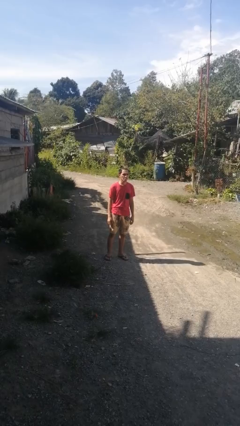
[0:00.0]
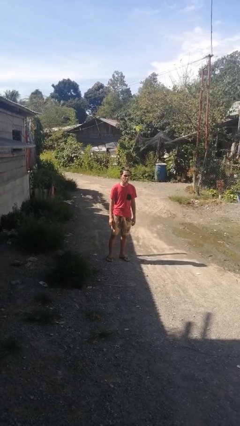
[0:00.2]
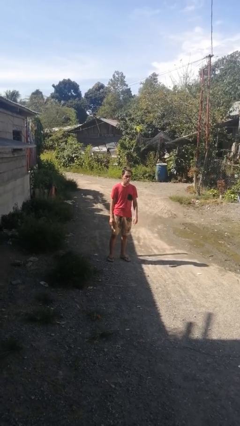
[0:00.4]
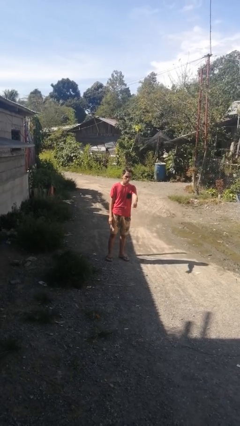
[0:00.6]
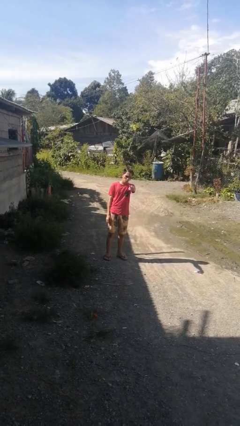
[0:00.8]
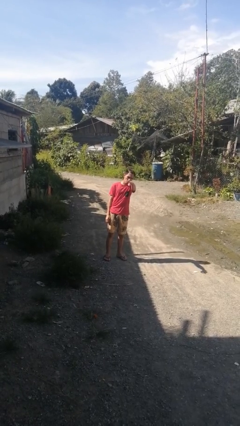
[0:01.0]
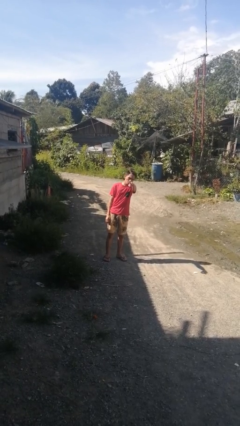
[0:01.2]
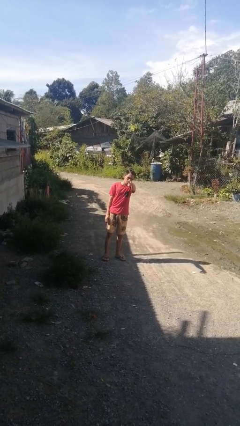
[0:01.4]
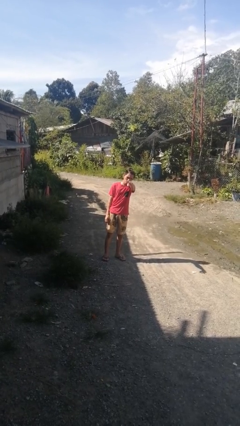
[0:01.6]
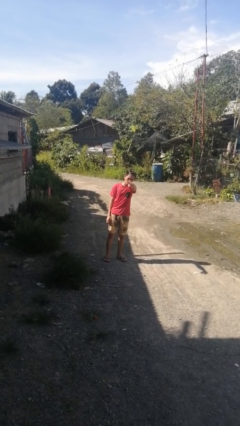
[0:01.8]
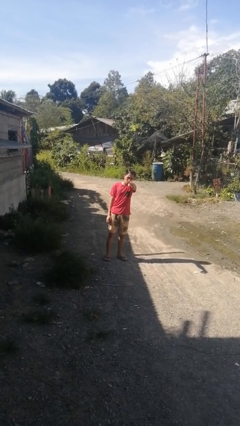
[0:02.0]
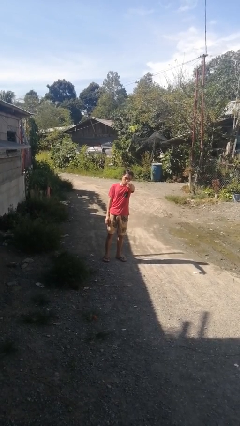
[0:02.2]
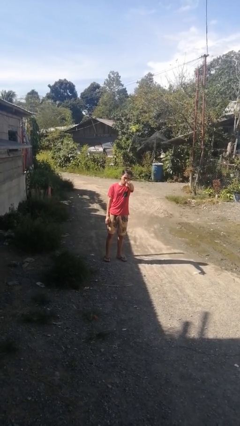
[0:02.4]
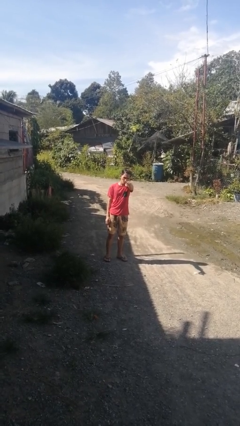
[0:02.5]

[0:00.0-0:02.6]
person points at person

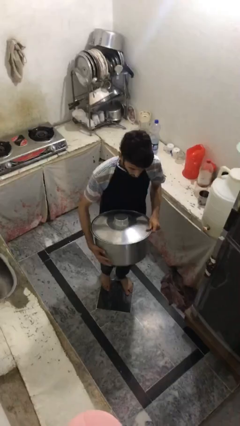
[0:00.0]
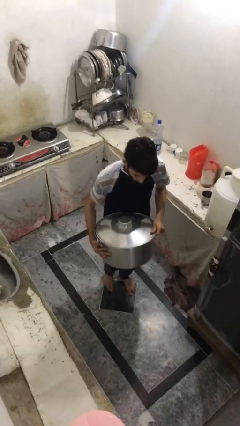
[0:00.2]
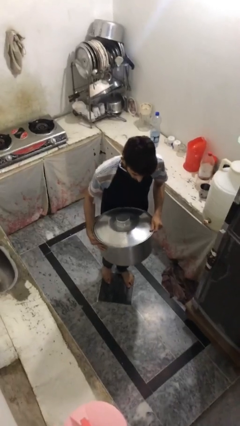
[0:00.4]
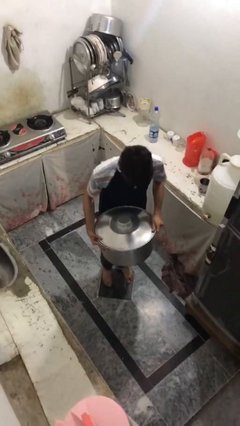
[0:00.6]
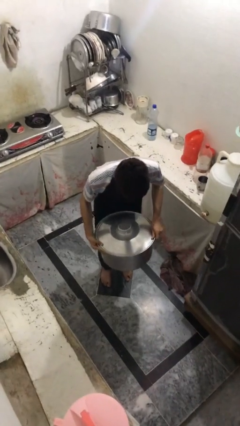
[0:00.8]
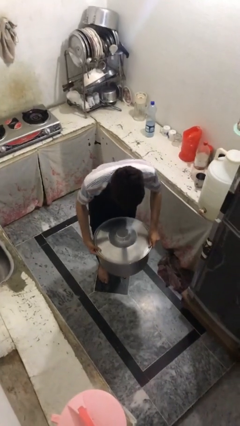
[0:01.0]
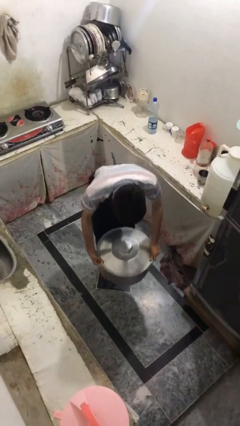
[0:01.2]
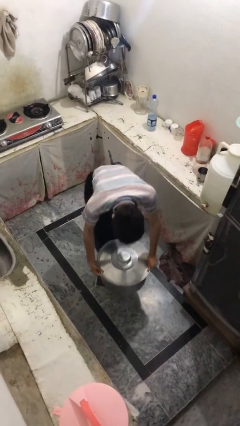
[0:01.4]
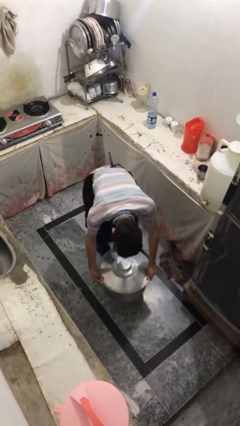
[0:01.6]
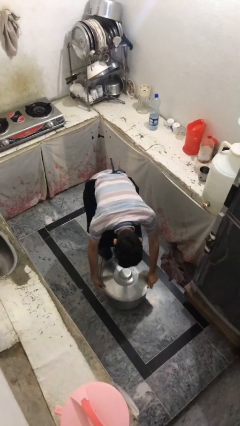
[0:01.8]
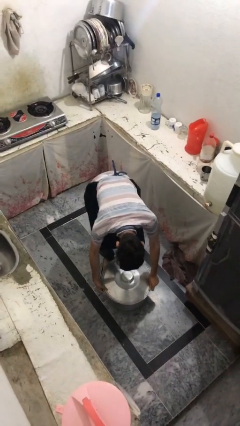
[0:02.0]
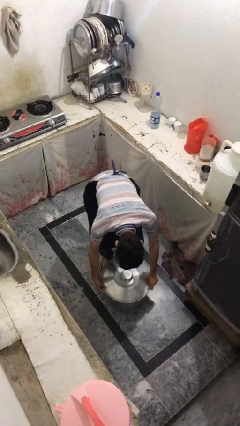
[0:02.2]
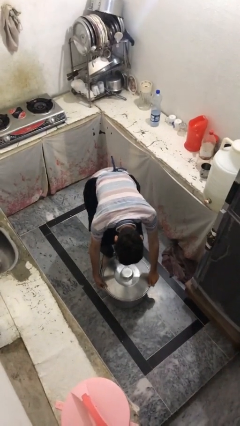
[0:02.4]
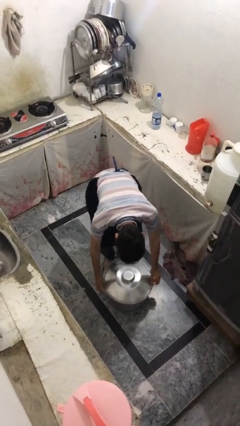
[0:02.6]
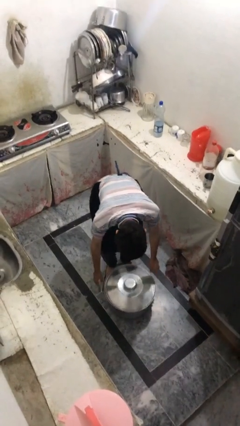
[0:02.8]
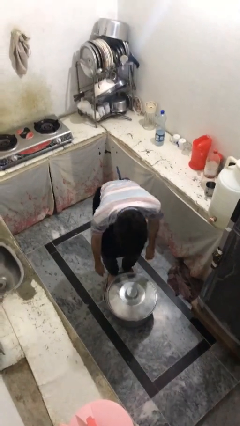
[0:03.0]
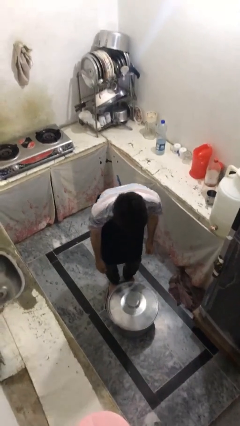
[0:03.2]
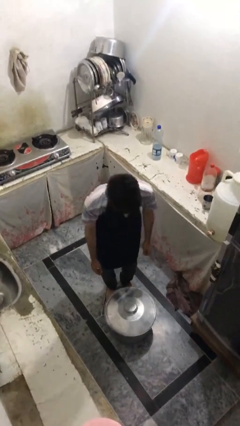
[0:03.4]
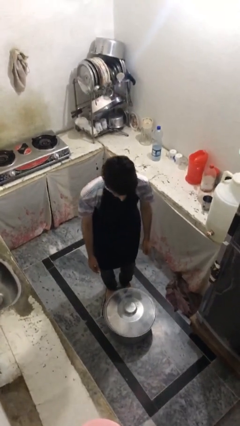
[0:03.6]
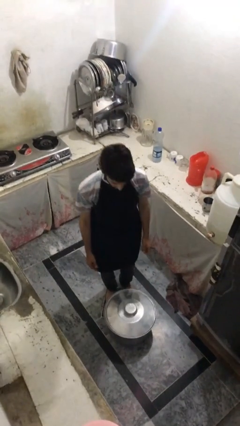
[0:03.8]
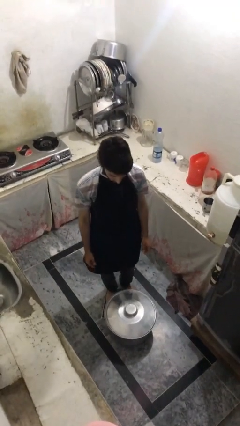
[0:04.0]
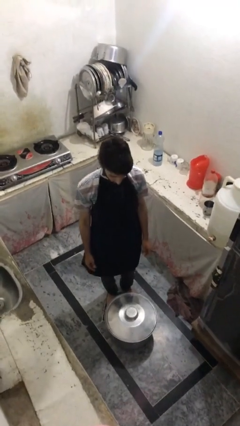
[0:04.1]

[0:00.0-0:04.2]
person puts down object on floor

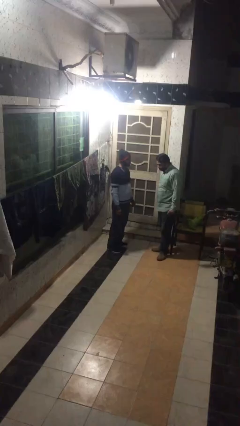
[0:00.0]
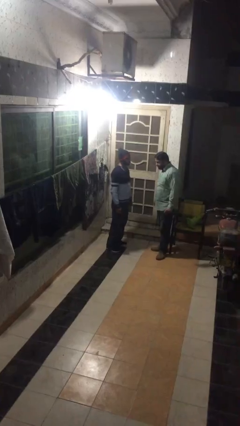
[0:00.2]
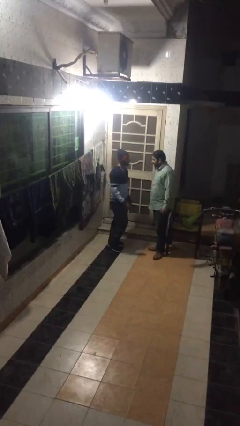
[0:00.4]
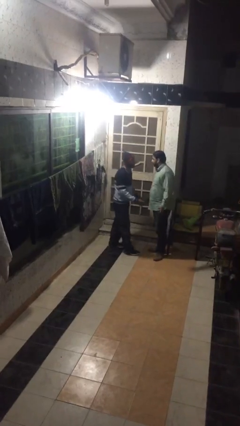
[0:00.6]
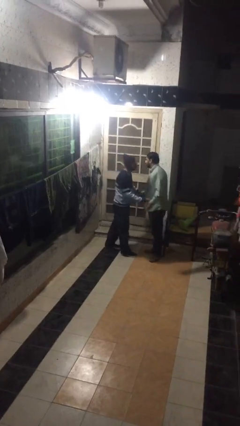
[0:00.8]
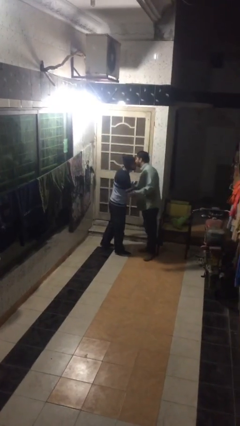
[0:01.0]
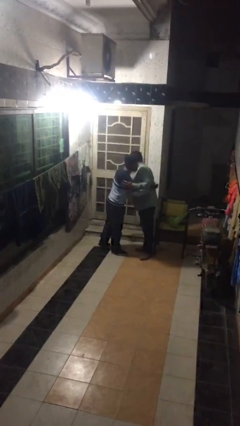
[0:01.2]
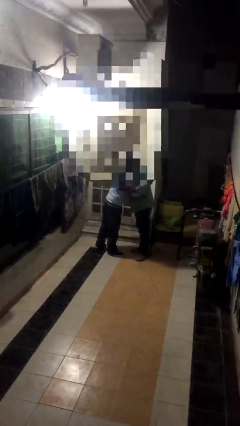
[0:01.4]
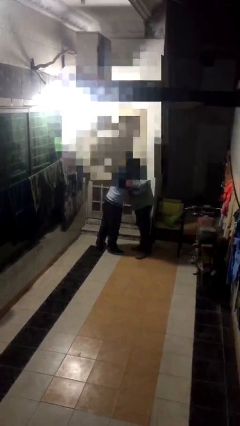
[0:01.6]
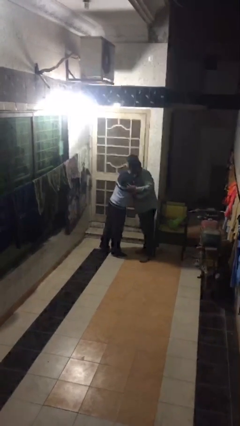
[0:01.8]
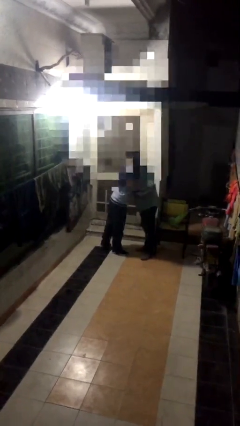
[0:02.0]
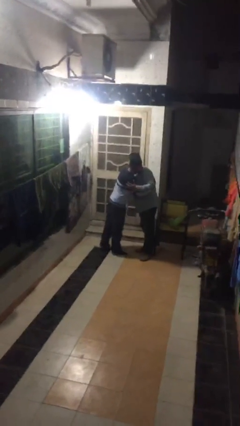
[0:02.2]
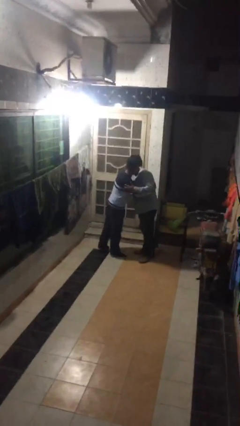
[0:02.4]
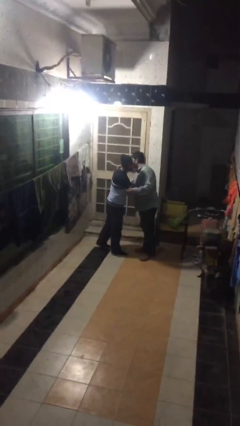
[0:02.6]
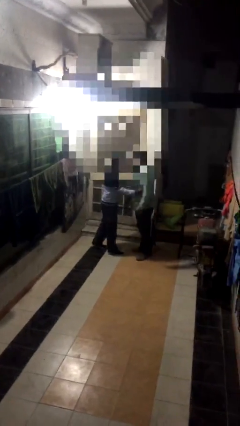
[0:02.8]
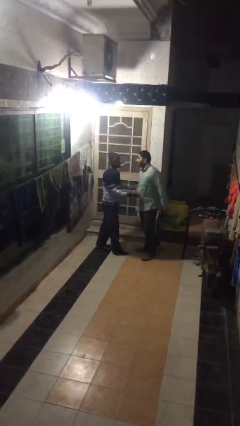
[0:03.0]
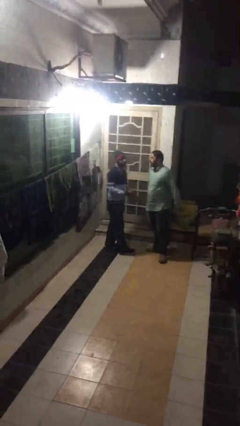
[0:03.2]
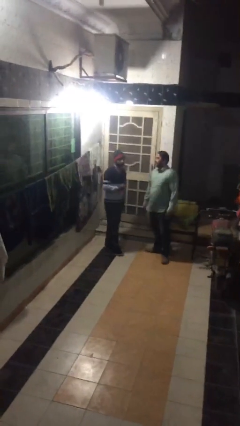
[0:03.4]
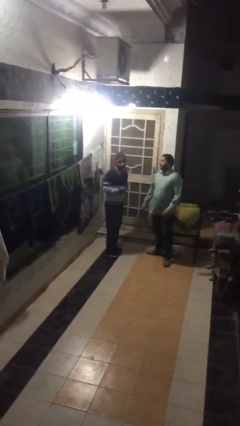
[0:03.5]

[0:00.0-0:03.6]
person embraces person

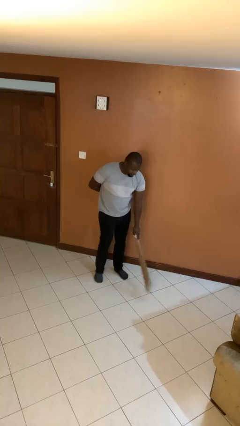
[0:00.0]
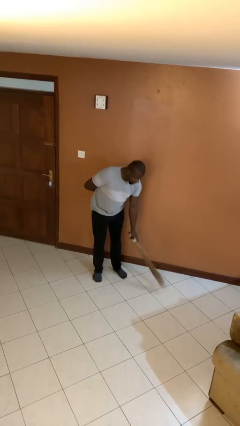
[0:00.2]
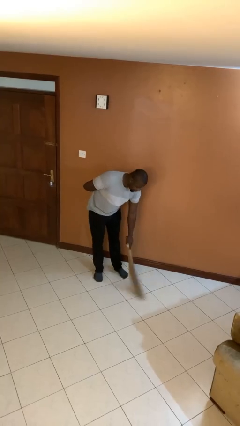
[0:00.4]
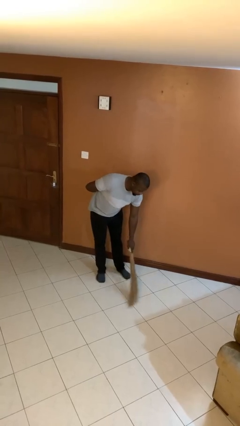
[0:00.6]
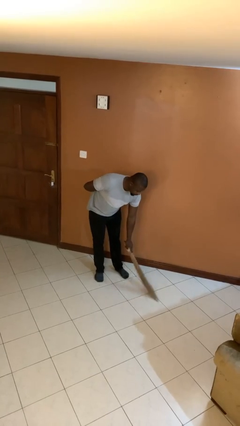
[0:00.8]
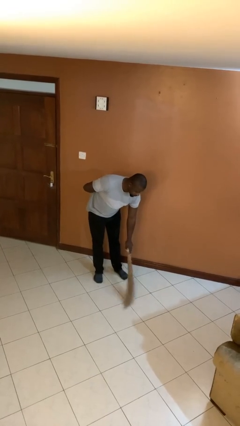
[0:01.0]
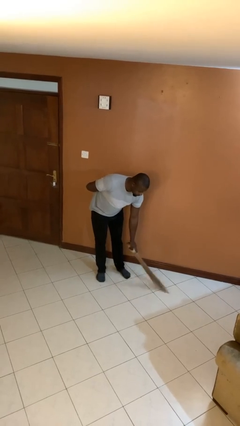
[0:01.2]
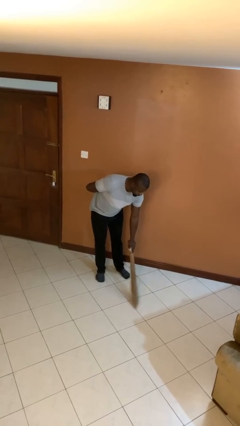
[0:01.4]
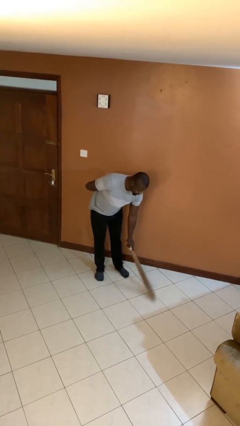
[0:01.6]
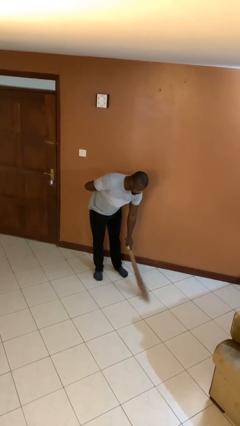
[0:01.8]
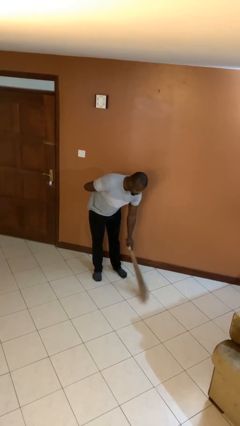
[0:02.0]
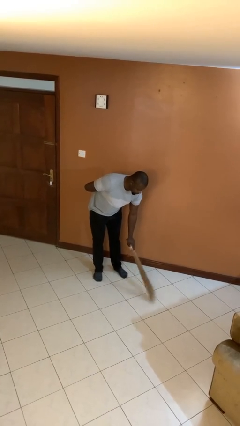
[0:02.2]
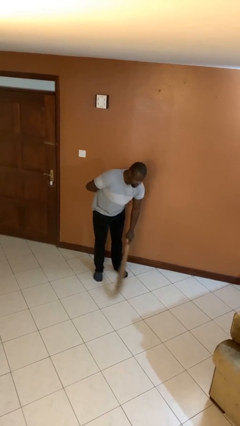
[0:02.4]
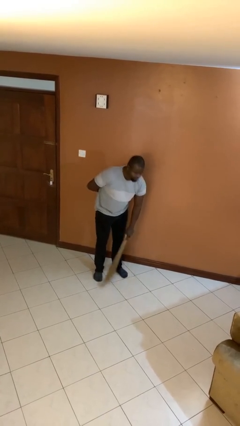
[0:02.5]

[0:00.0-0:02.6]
person sweeps floor

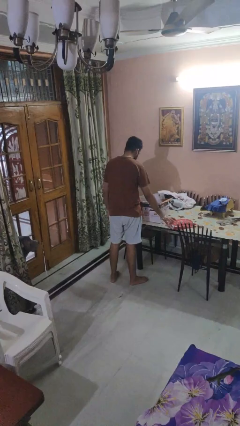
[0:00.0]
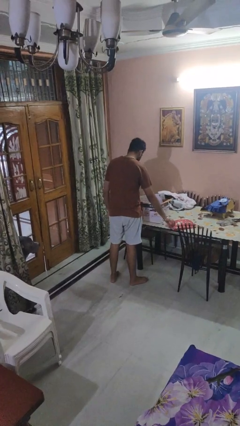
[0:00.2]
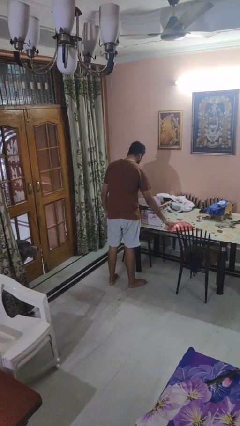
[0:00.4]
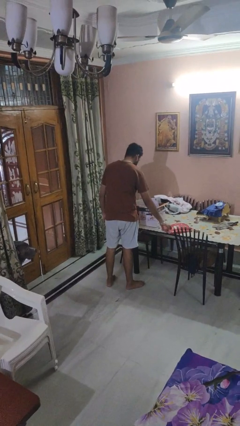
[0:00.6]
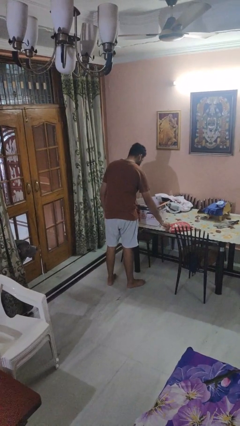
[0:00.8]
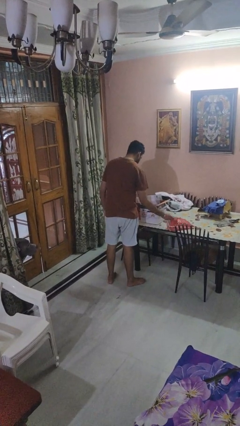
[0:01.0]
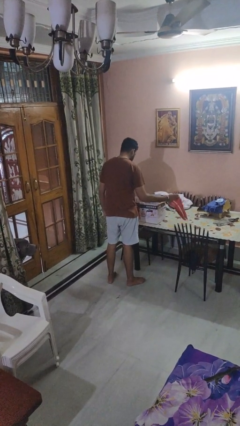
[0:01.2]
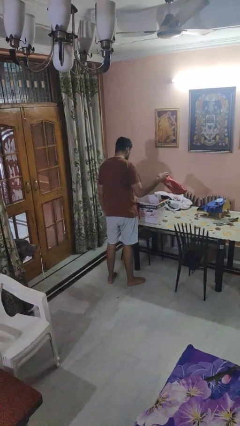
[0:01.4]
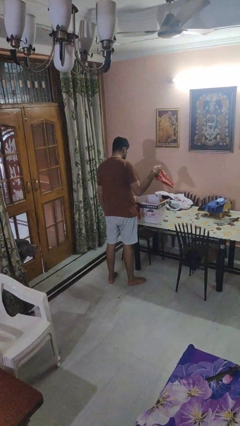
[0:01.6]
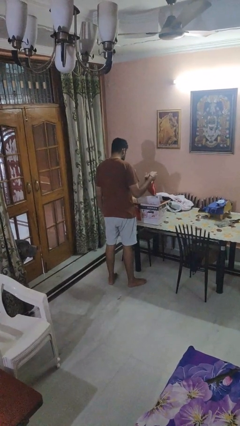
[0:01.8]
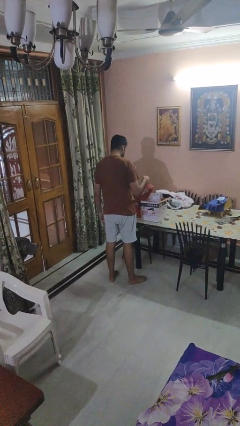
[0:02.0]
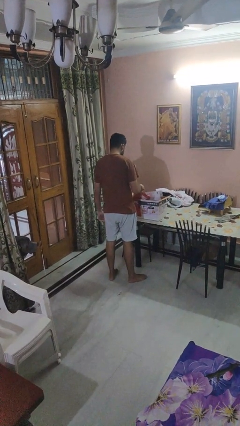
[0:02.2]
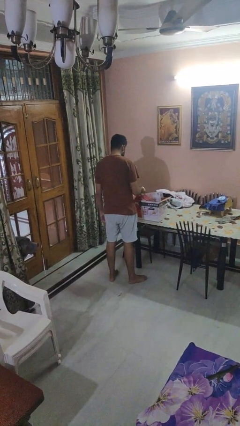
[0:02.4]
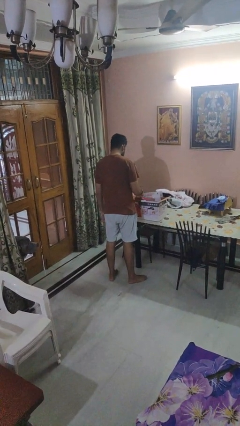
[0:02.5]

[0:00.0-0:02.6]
person puts object into box

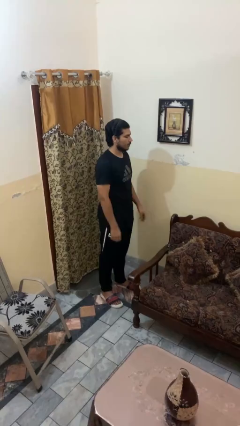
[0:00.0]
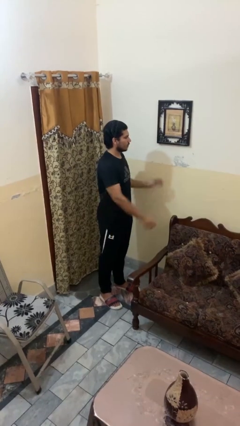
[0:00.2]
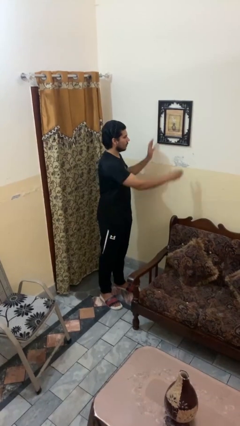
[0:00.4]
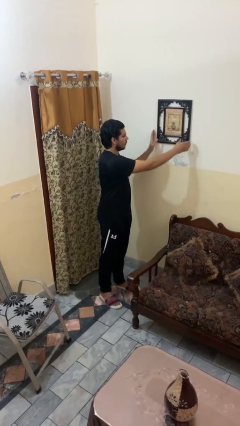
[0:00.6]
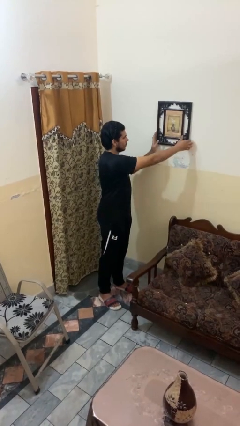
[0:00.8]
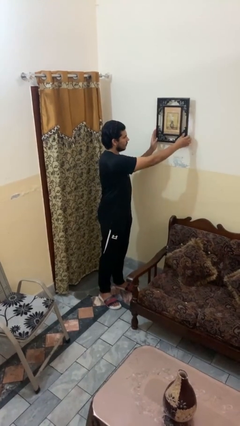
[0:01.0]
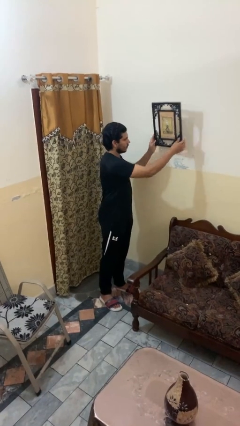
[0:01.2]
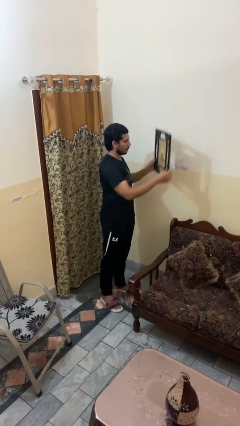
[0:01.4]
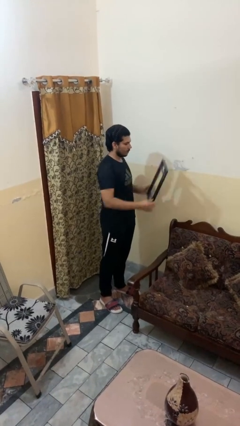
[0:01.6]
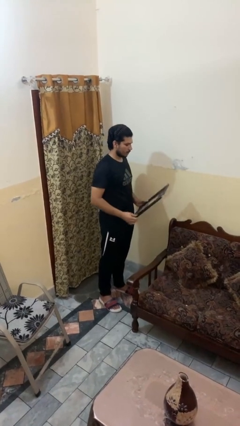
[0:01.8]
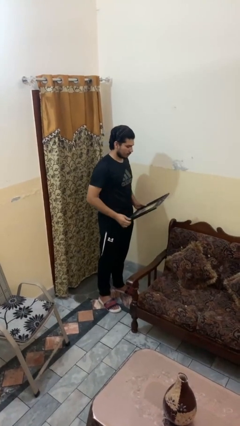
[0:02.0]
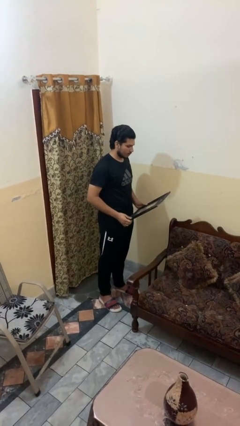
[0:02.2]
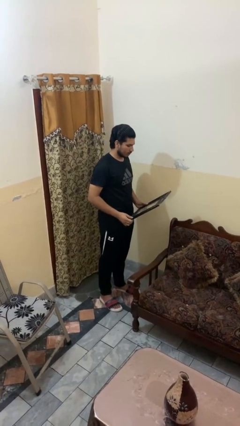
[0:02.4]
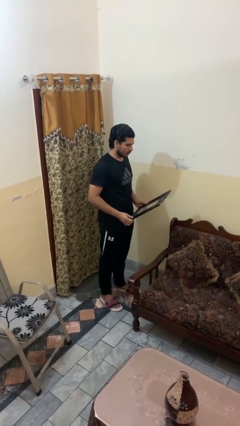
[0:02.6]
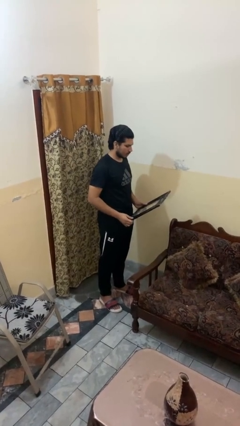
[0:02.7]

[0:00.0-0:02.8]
person takes down picture frame
